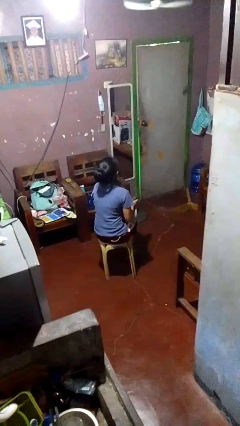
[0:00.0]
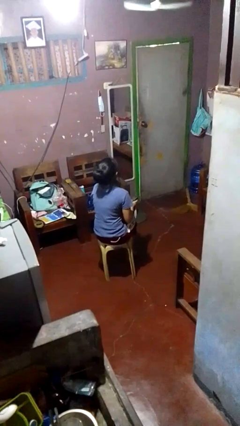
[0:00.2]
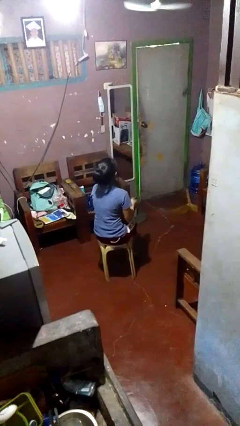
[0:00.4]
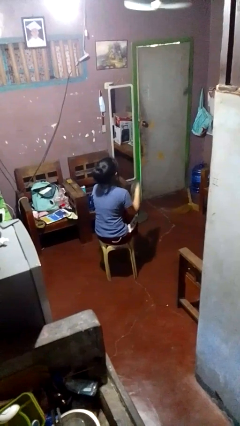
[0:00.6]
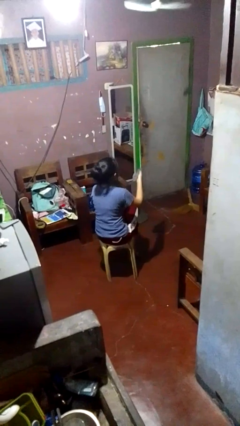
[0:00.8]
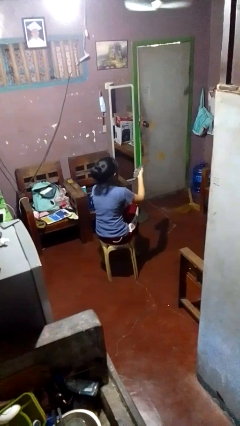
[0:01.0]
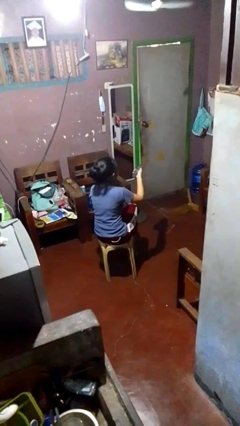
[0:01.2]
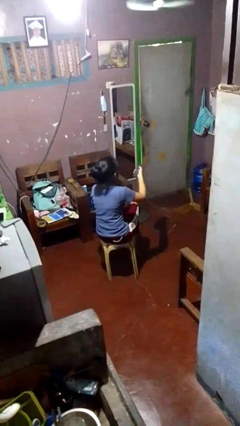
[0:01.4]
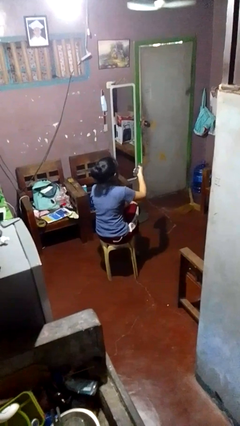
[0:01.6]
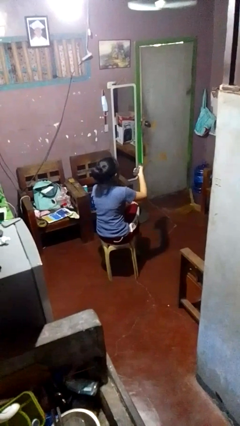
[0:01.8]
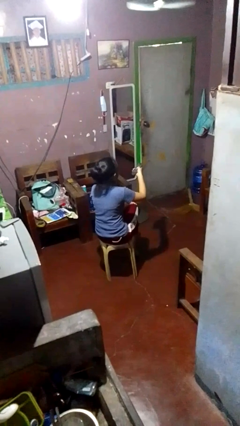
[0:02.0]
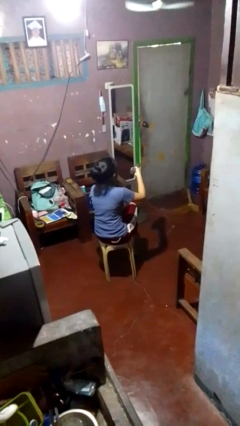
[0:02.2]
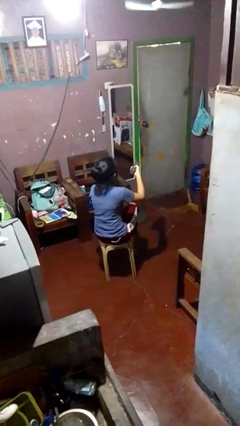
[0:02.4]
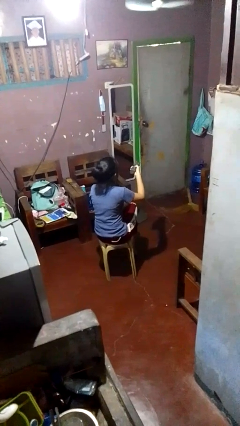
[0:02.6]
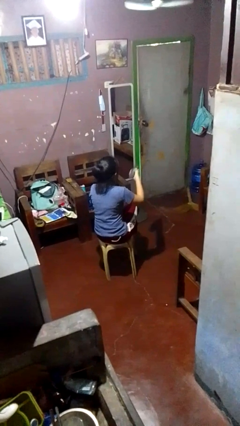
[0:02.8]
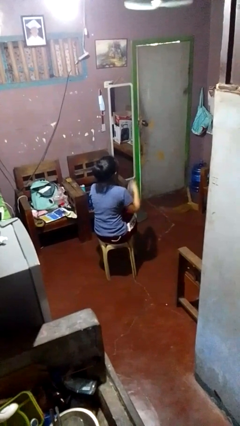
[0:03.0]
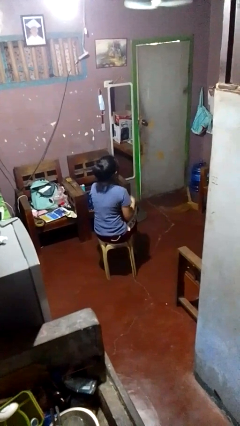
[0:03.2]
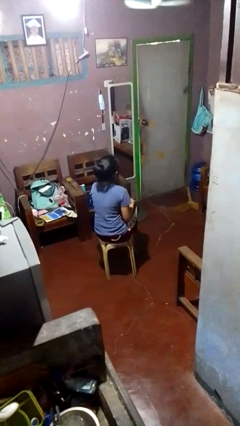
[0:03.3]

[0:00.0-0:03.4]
person uses television remote

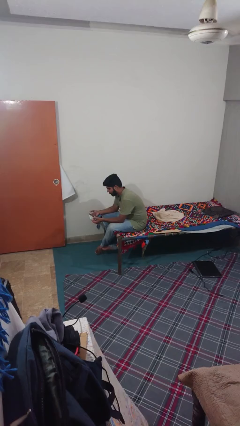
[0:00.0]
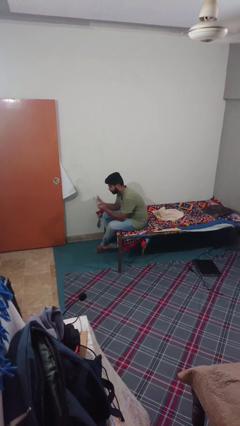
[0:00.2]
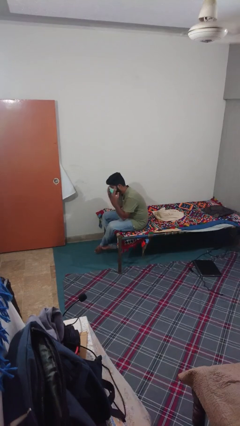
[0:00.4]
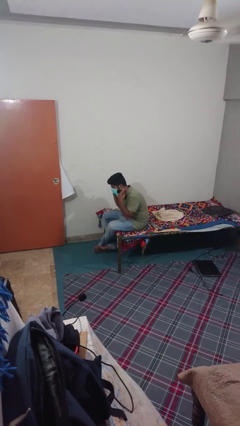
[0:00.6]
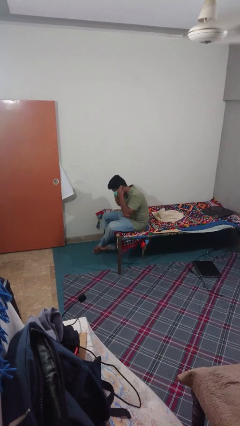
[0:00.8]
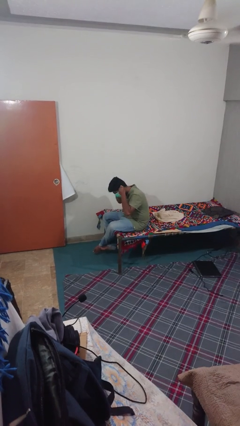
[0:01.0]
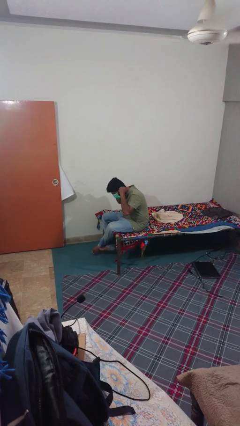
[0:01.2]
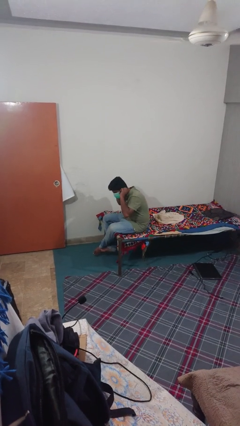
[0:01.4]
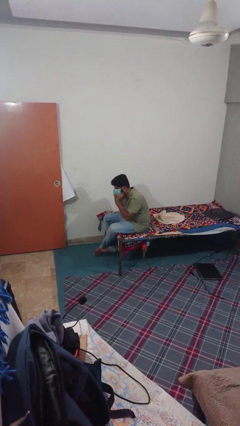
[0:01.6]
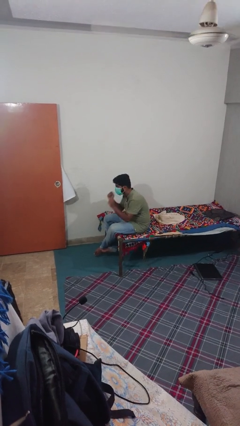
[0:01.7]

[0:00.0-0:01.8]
person puts on facemask

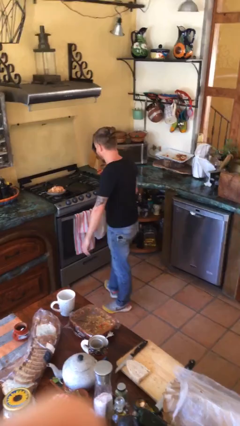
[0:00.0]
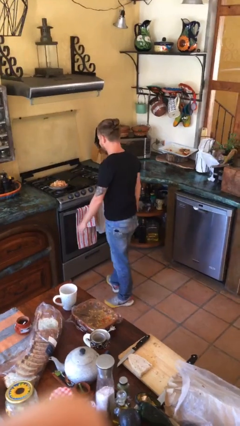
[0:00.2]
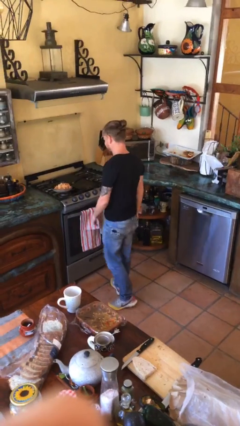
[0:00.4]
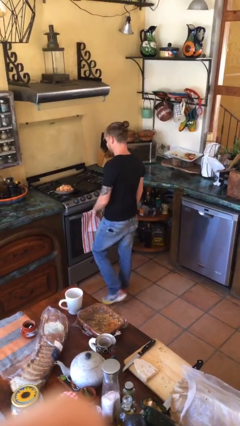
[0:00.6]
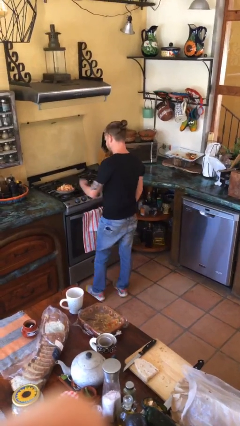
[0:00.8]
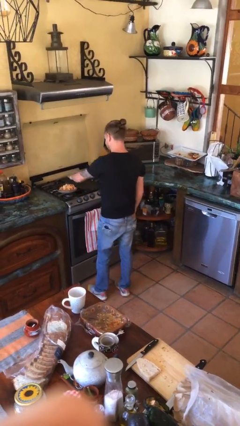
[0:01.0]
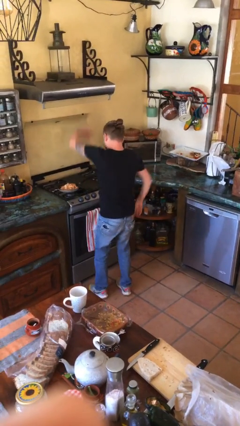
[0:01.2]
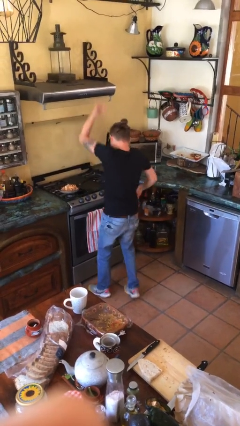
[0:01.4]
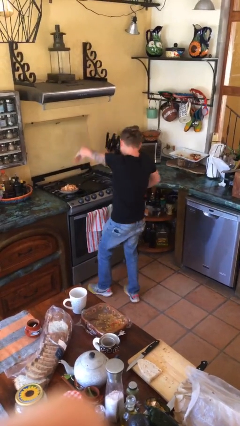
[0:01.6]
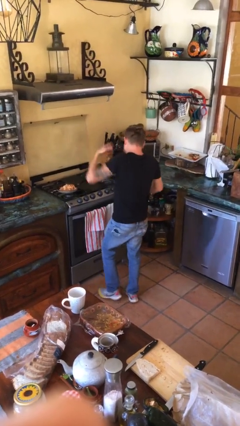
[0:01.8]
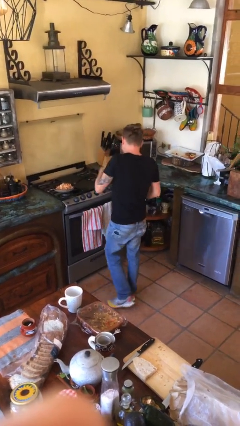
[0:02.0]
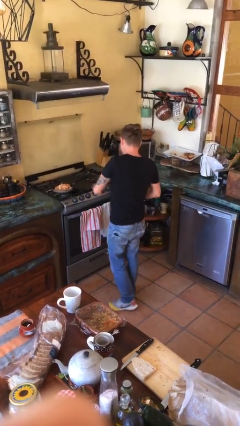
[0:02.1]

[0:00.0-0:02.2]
person burns hand

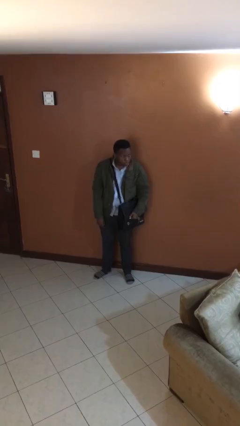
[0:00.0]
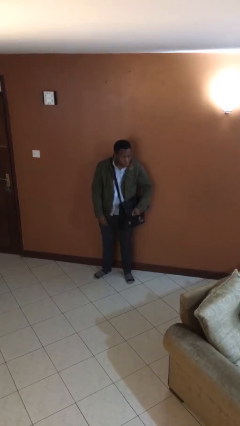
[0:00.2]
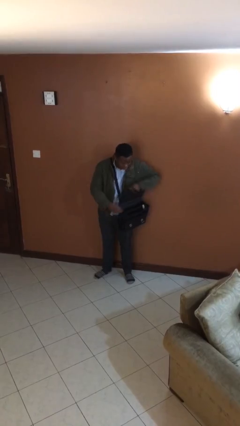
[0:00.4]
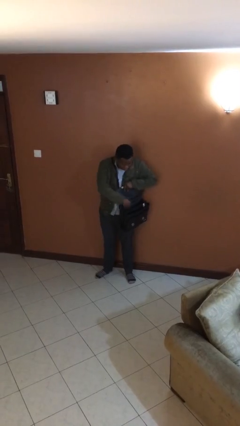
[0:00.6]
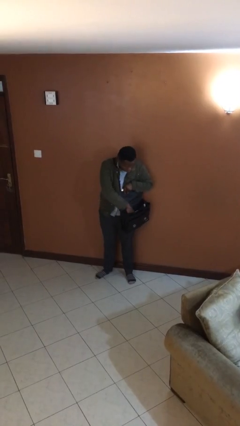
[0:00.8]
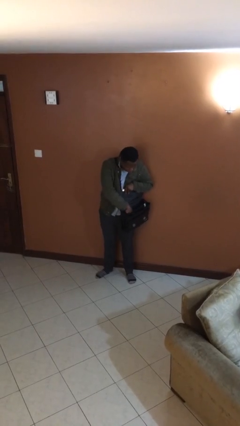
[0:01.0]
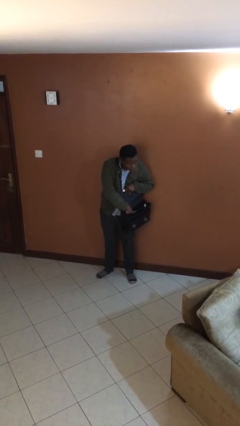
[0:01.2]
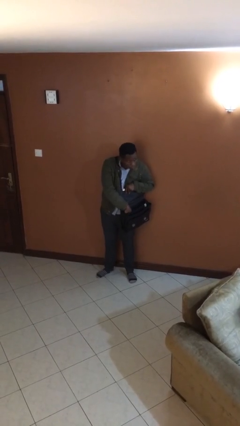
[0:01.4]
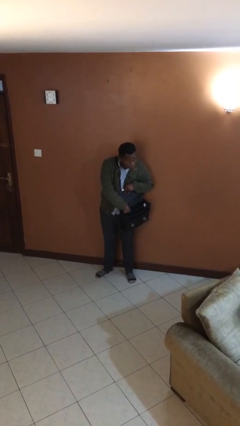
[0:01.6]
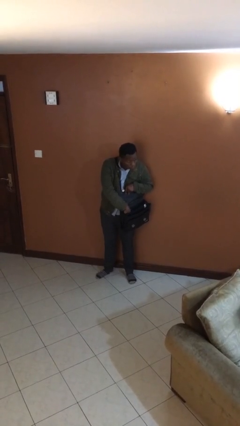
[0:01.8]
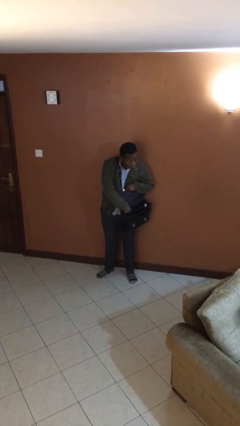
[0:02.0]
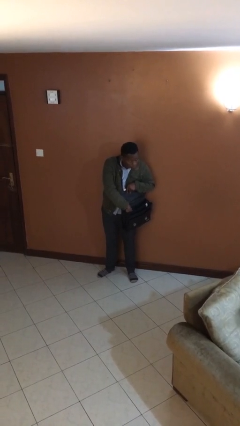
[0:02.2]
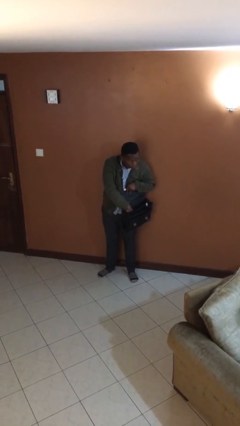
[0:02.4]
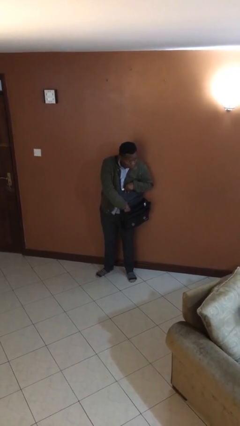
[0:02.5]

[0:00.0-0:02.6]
person searches in purse

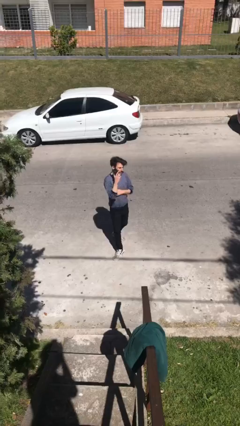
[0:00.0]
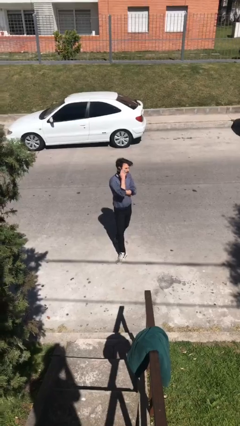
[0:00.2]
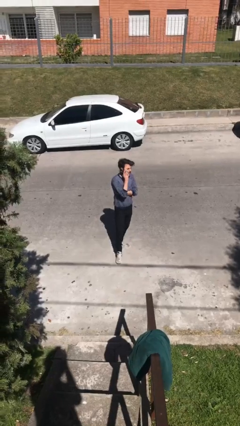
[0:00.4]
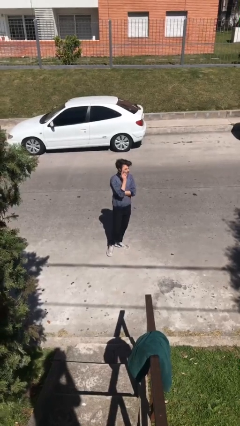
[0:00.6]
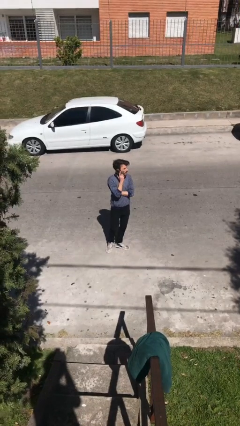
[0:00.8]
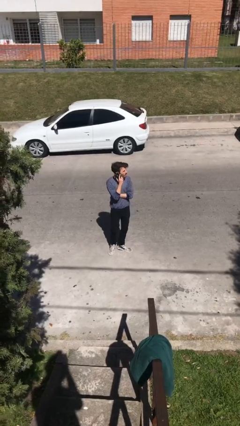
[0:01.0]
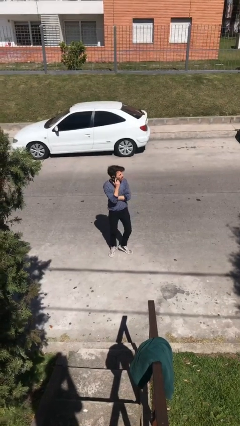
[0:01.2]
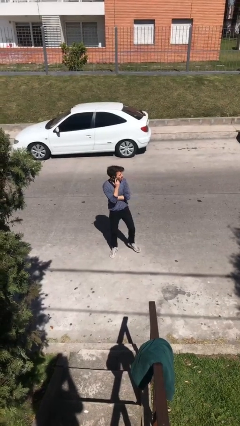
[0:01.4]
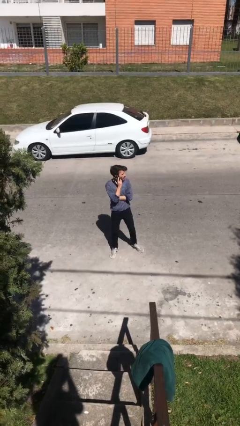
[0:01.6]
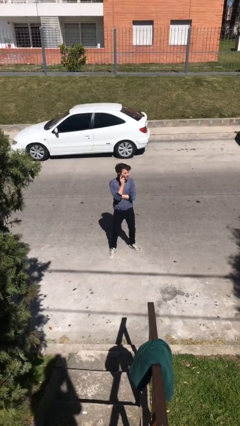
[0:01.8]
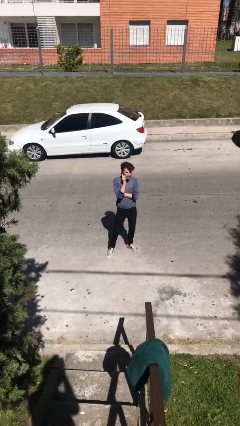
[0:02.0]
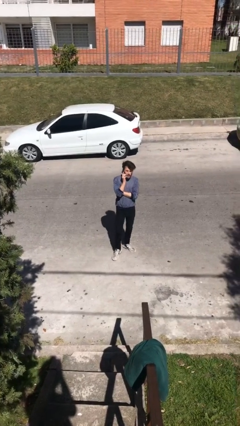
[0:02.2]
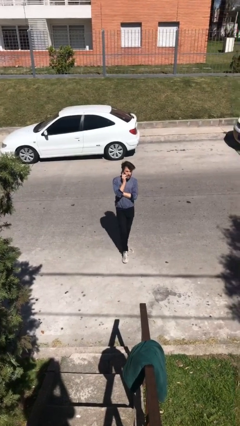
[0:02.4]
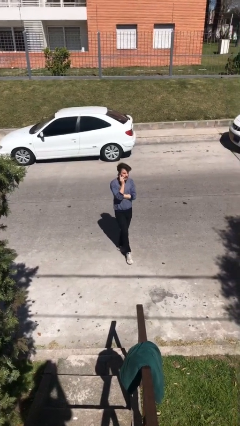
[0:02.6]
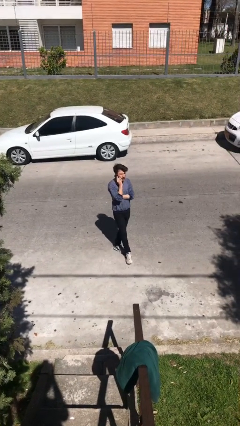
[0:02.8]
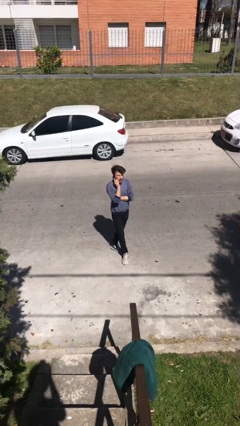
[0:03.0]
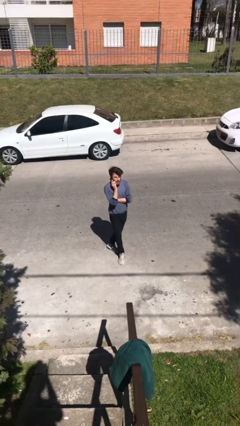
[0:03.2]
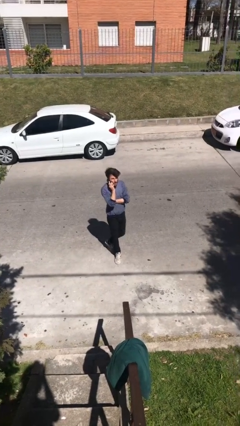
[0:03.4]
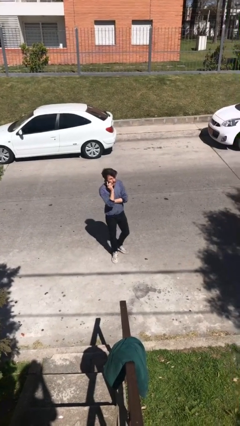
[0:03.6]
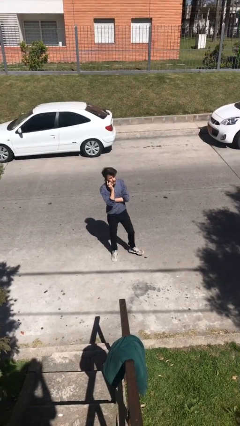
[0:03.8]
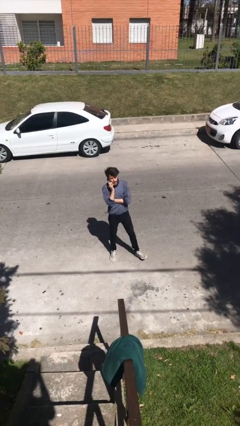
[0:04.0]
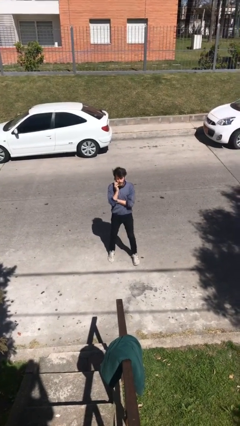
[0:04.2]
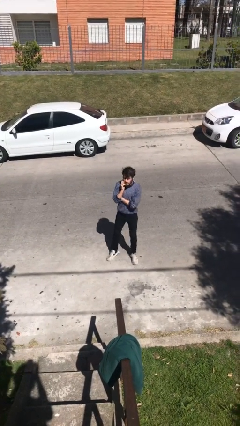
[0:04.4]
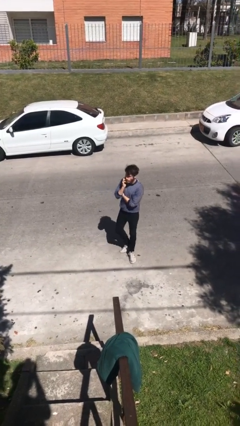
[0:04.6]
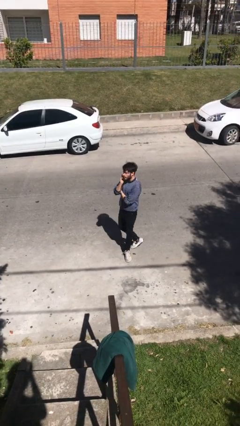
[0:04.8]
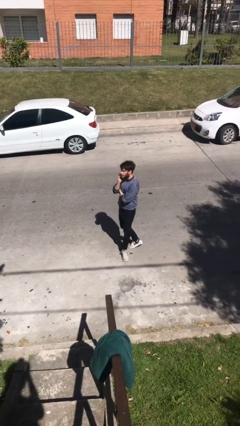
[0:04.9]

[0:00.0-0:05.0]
person talks on phone

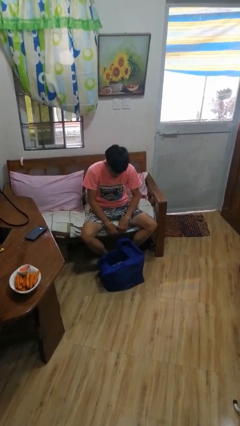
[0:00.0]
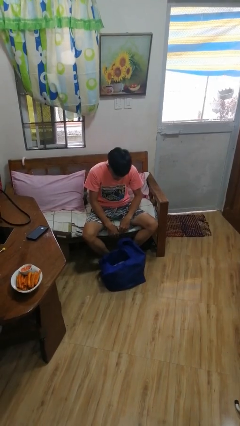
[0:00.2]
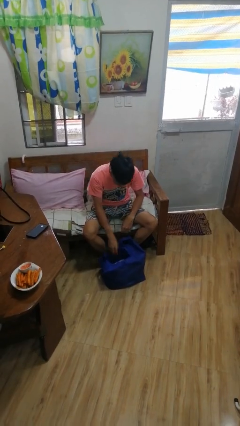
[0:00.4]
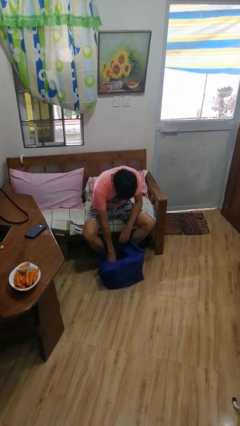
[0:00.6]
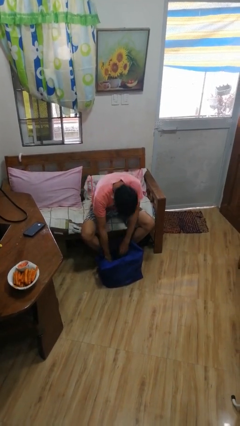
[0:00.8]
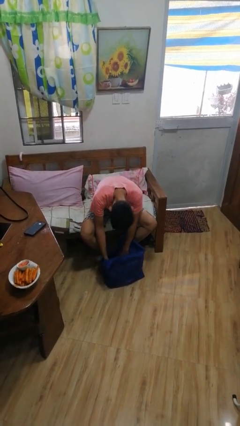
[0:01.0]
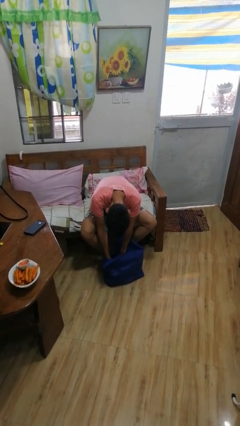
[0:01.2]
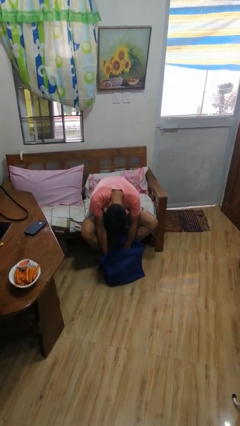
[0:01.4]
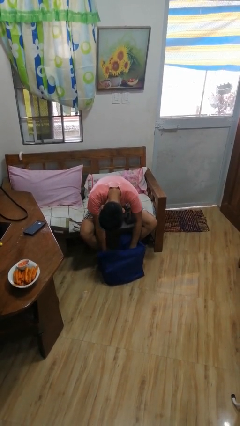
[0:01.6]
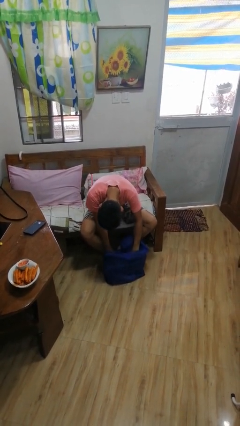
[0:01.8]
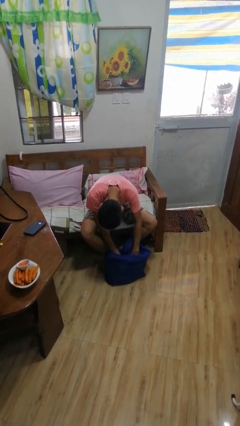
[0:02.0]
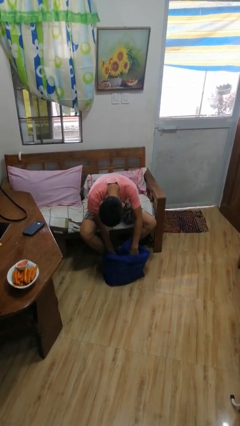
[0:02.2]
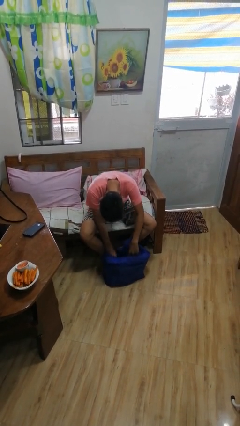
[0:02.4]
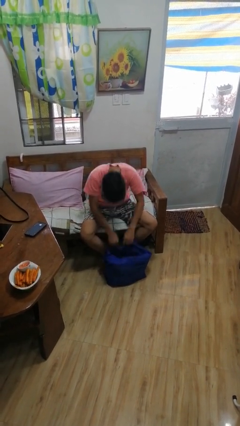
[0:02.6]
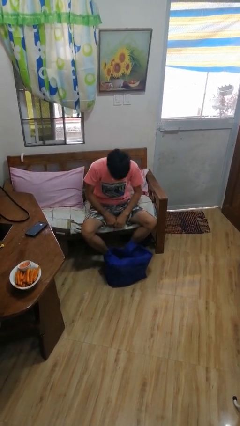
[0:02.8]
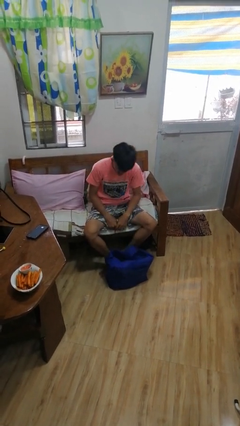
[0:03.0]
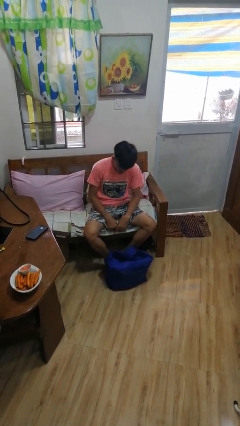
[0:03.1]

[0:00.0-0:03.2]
person searches in bag
